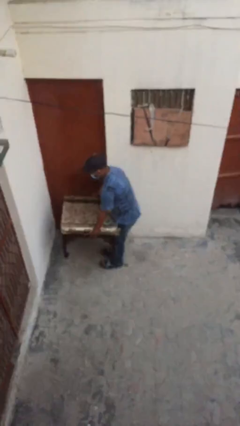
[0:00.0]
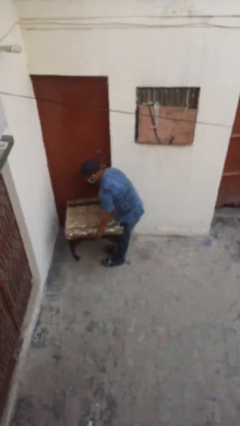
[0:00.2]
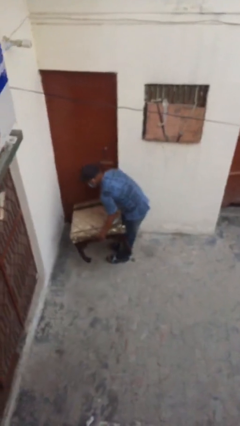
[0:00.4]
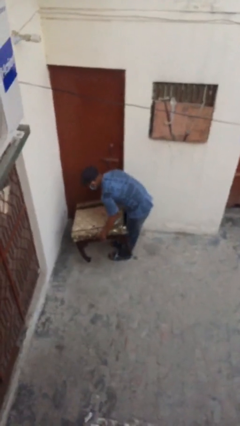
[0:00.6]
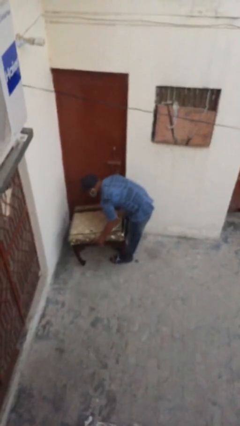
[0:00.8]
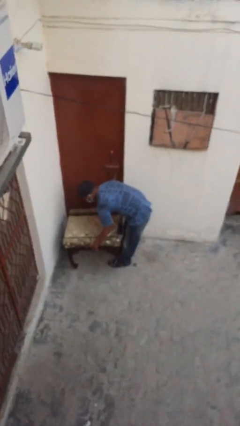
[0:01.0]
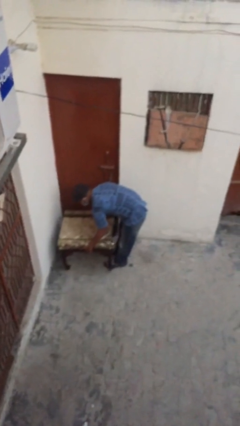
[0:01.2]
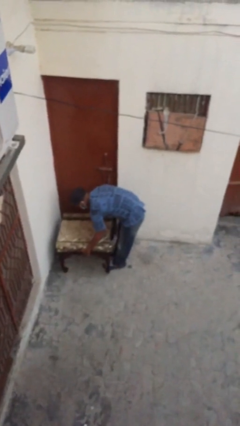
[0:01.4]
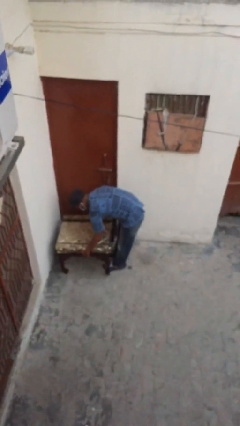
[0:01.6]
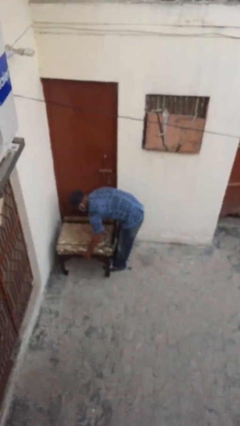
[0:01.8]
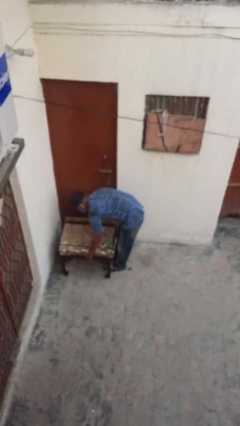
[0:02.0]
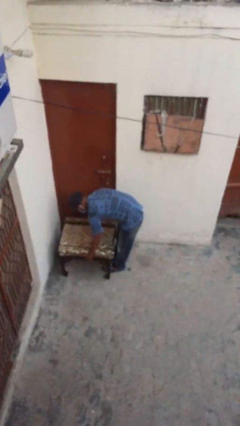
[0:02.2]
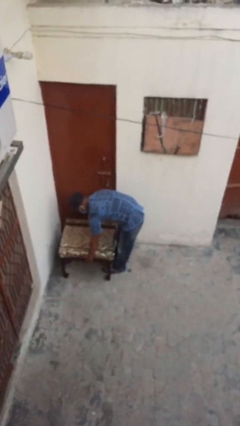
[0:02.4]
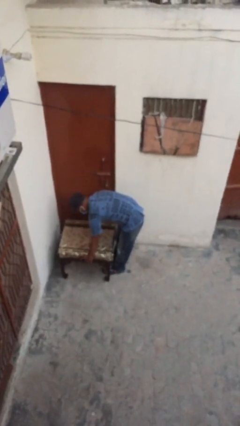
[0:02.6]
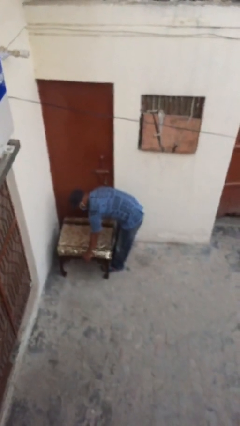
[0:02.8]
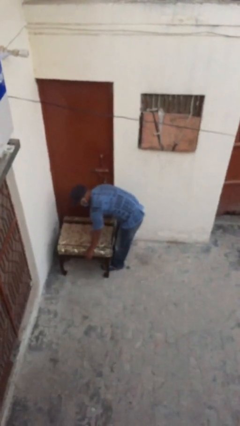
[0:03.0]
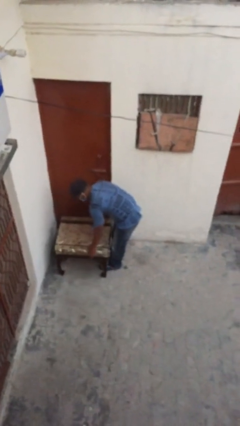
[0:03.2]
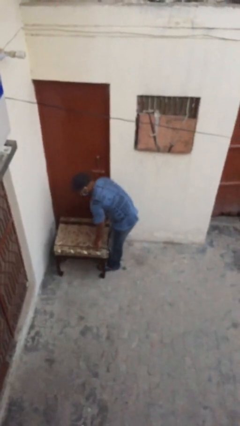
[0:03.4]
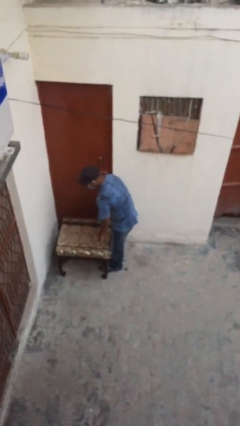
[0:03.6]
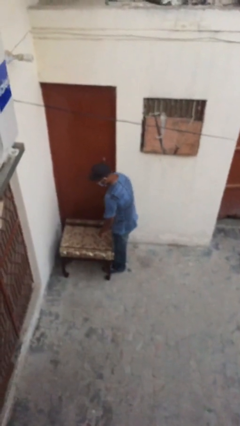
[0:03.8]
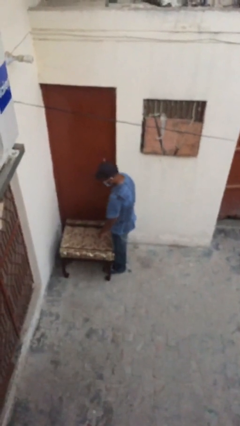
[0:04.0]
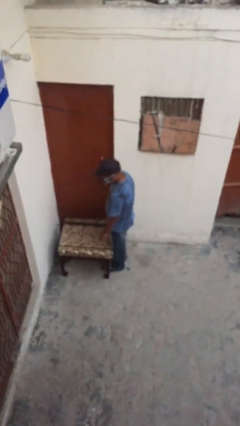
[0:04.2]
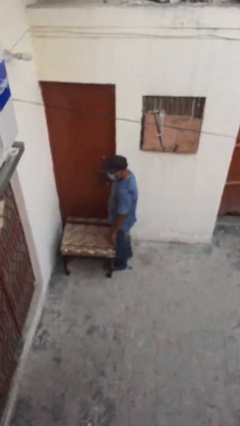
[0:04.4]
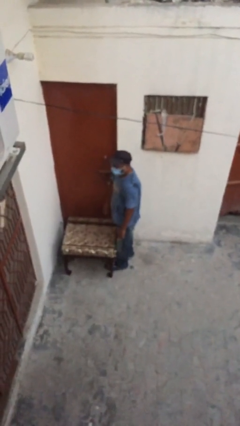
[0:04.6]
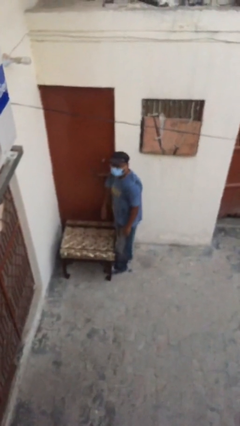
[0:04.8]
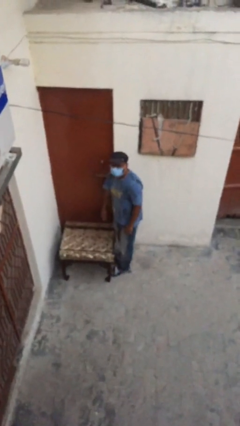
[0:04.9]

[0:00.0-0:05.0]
person puts down object on floor

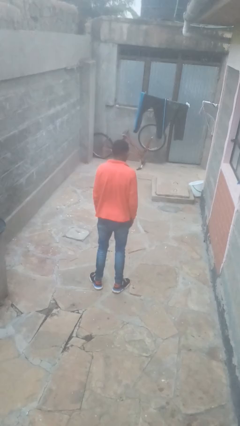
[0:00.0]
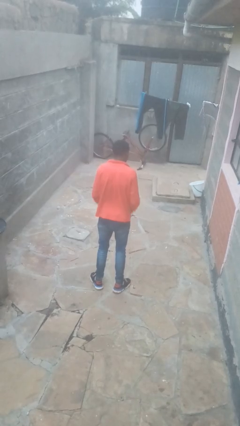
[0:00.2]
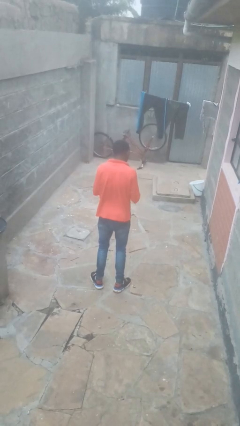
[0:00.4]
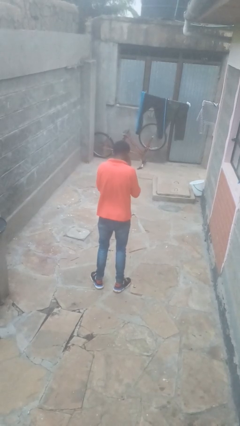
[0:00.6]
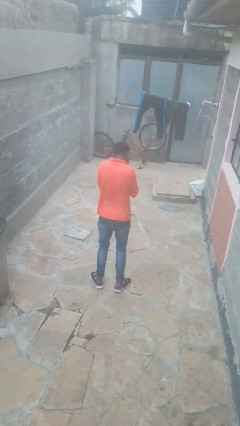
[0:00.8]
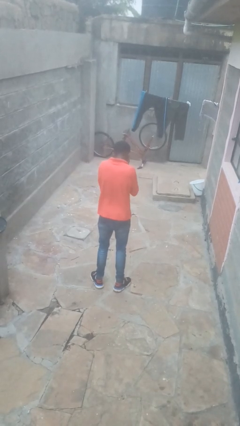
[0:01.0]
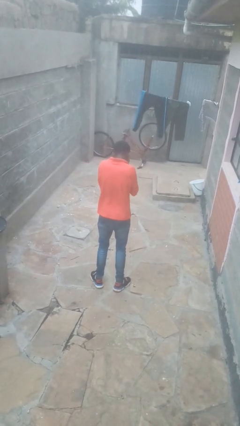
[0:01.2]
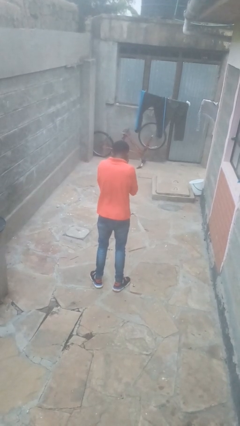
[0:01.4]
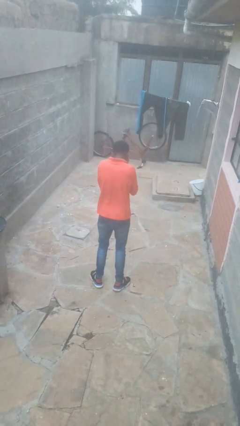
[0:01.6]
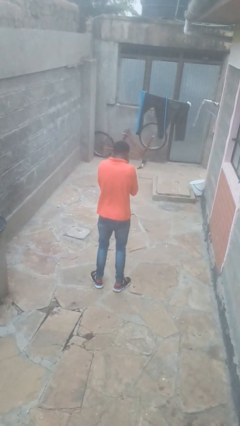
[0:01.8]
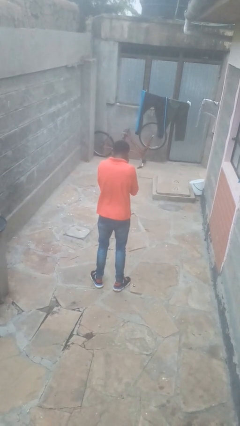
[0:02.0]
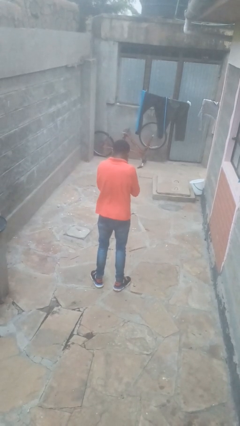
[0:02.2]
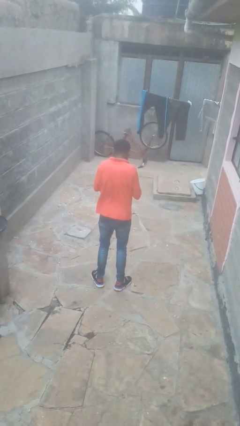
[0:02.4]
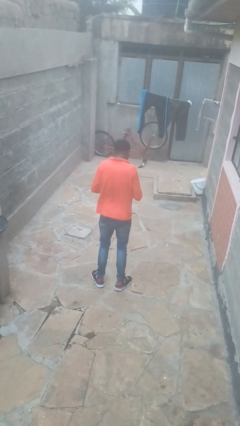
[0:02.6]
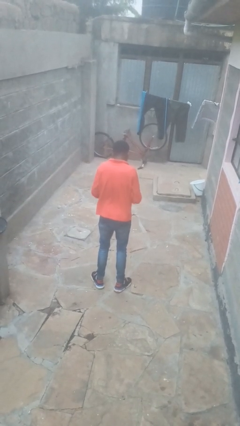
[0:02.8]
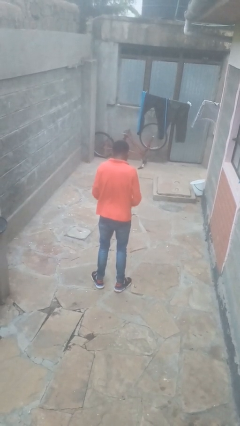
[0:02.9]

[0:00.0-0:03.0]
person covers face with hands

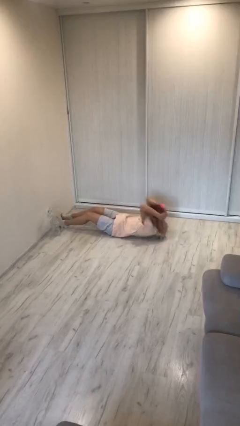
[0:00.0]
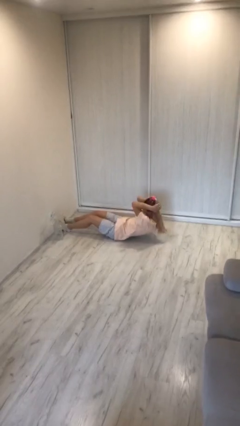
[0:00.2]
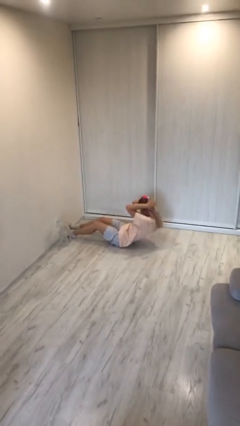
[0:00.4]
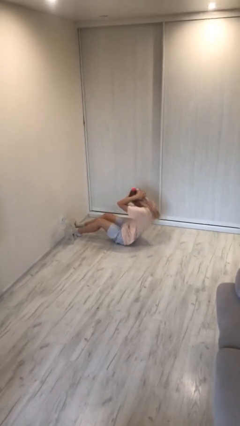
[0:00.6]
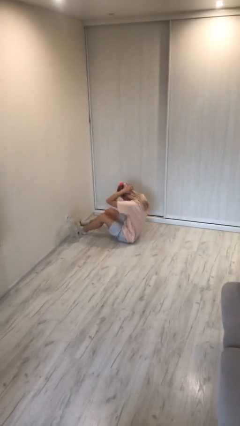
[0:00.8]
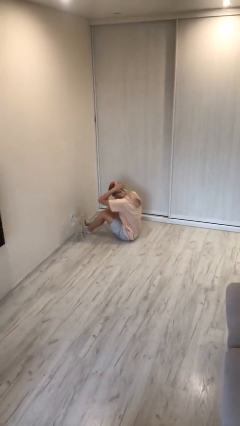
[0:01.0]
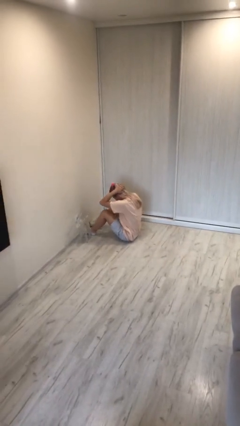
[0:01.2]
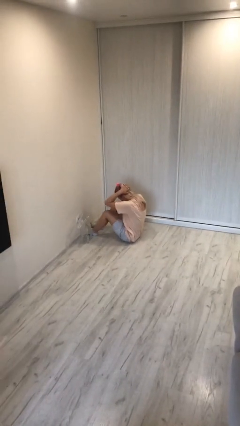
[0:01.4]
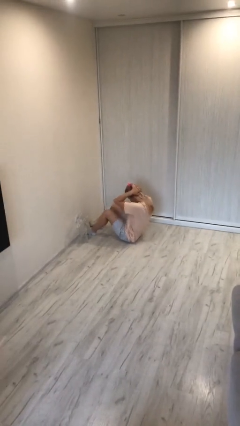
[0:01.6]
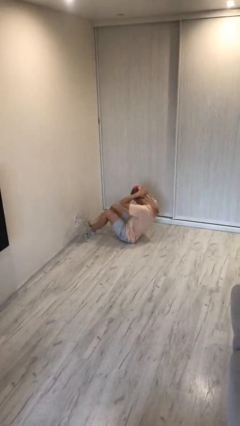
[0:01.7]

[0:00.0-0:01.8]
person exercises with situp

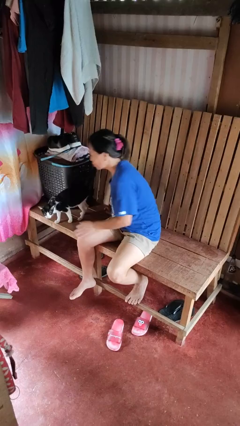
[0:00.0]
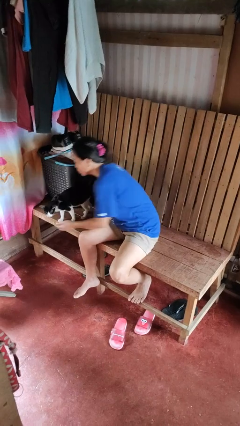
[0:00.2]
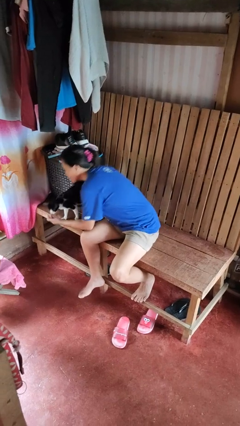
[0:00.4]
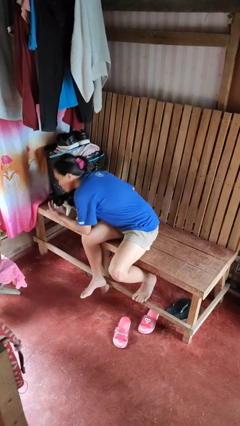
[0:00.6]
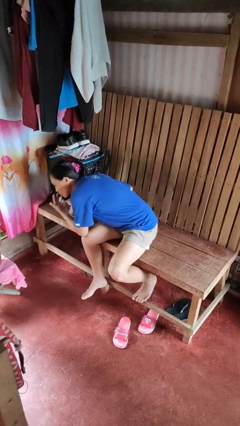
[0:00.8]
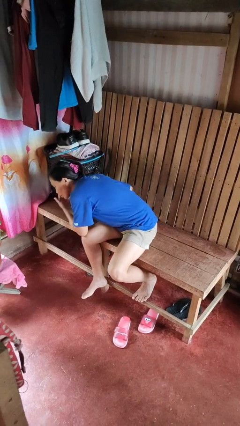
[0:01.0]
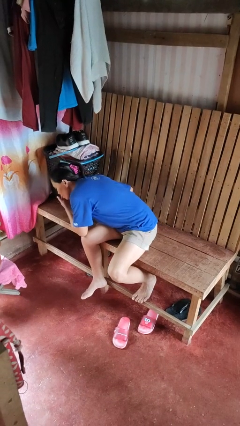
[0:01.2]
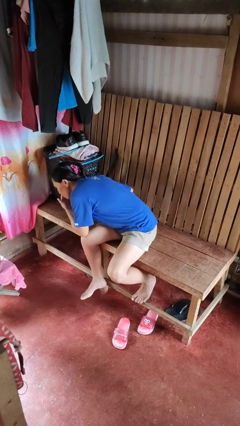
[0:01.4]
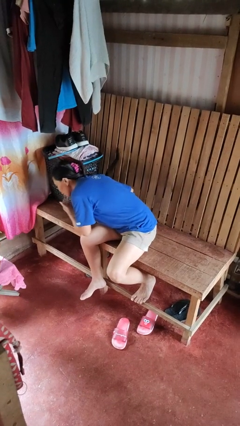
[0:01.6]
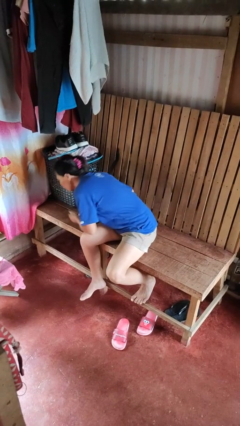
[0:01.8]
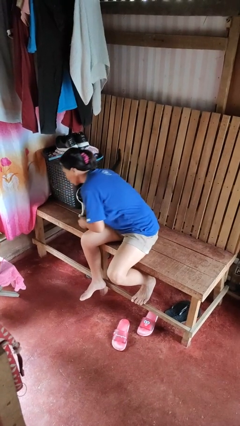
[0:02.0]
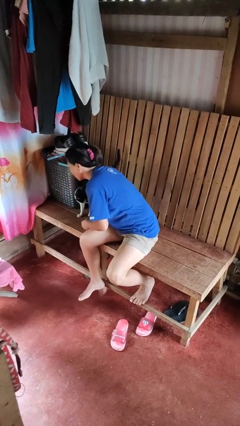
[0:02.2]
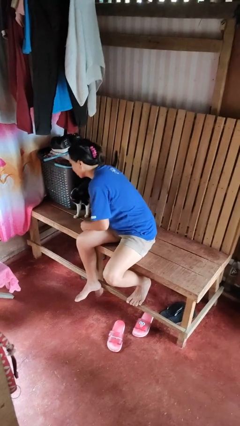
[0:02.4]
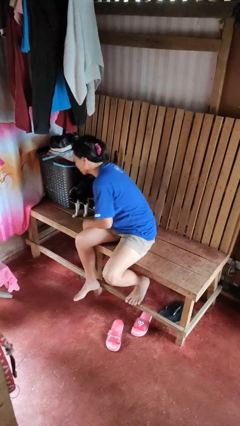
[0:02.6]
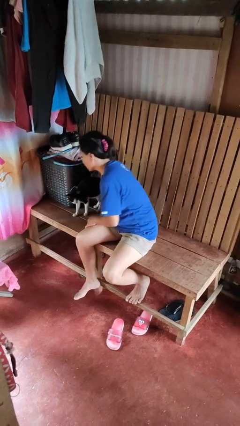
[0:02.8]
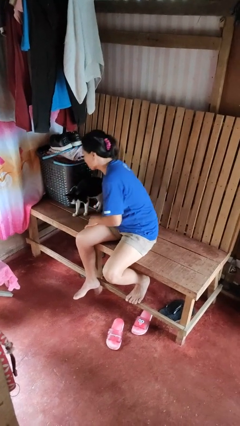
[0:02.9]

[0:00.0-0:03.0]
person hugs cat

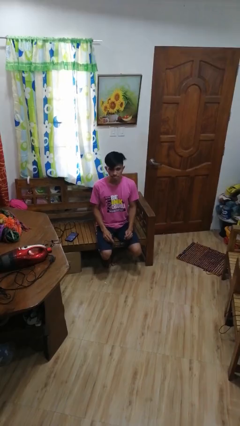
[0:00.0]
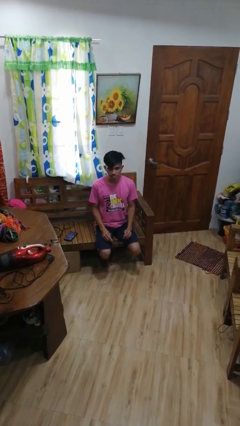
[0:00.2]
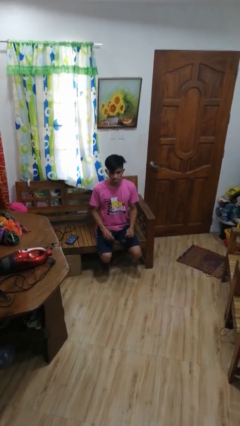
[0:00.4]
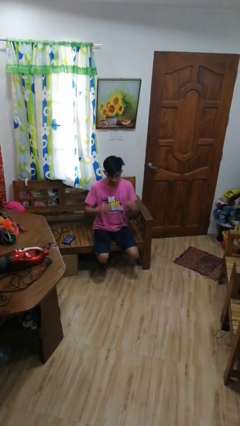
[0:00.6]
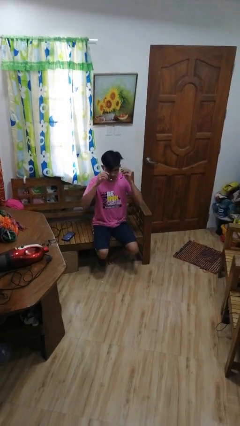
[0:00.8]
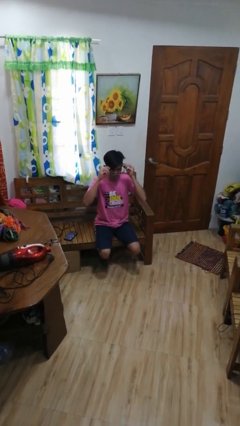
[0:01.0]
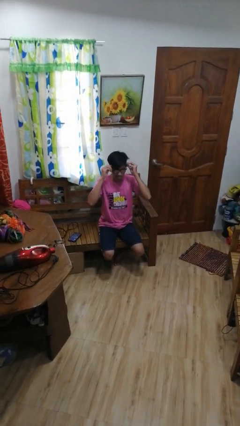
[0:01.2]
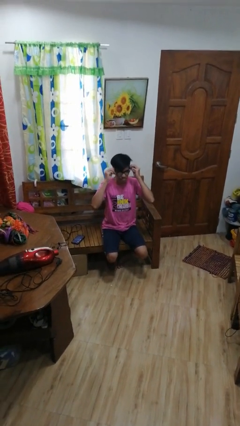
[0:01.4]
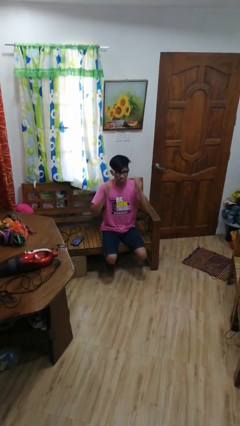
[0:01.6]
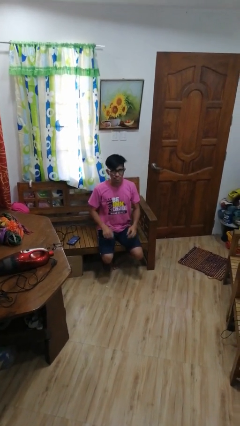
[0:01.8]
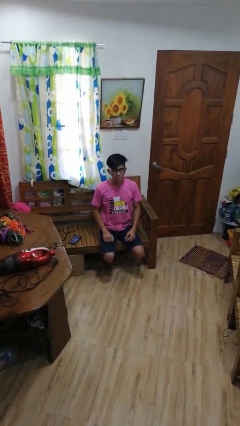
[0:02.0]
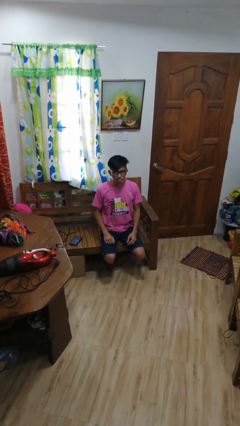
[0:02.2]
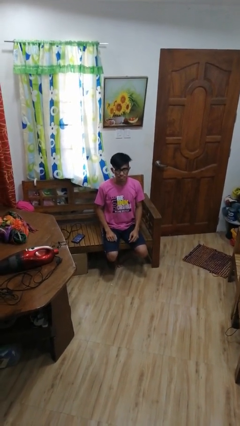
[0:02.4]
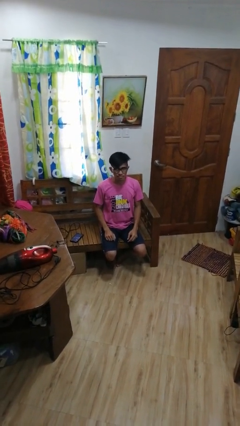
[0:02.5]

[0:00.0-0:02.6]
person puts on glasses

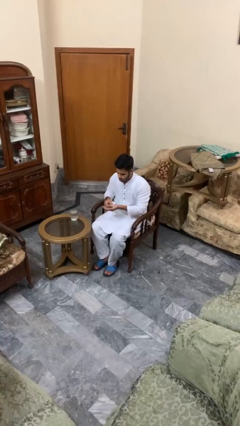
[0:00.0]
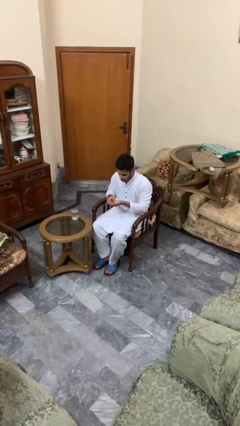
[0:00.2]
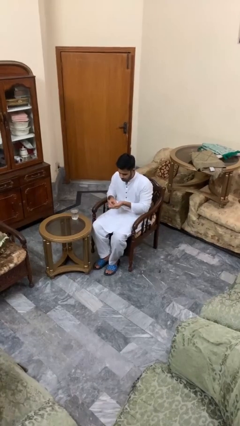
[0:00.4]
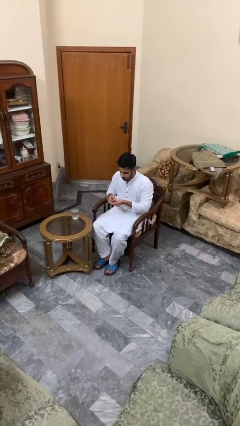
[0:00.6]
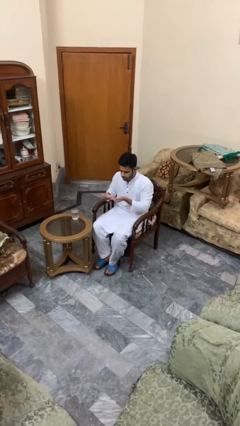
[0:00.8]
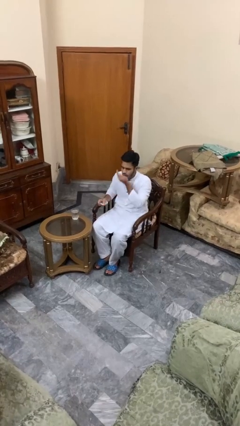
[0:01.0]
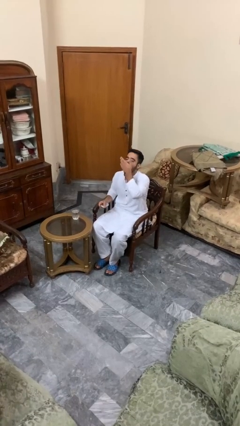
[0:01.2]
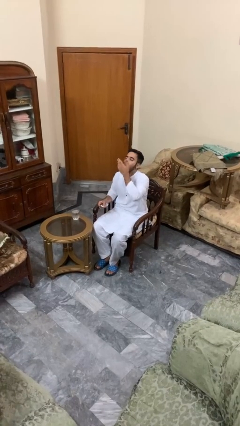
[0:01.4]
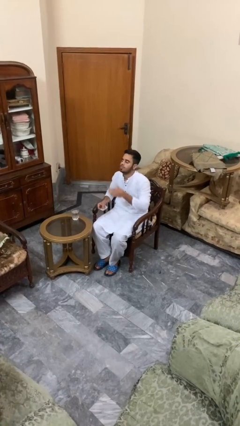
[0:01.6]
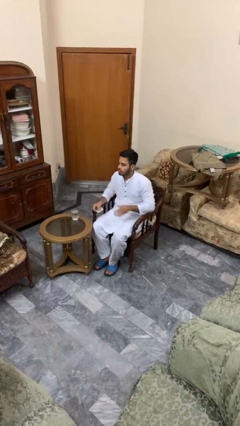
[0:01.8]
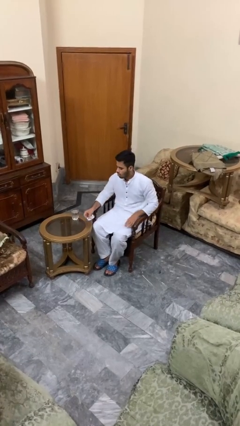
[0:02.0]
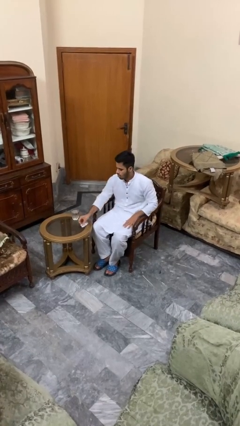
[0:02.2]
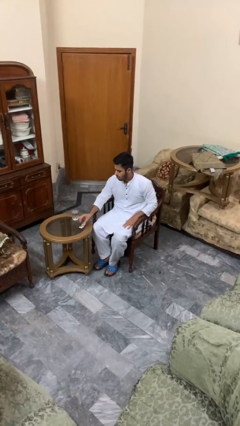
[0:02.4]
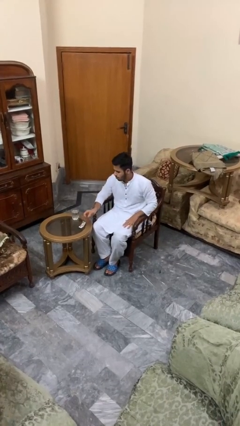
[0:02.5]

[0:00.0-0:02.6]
person takes medicine pills
